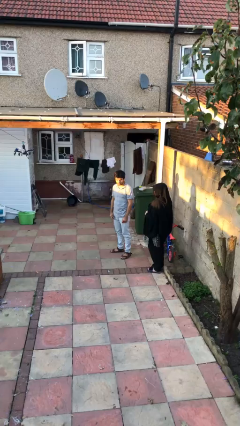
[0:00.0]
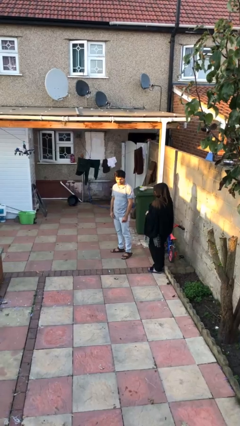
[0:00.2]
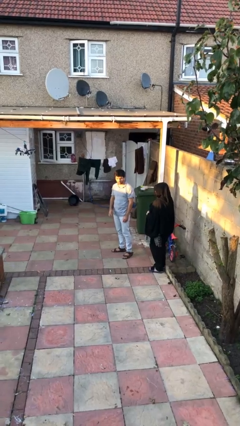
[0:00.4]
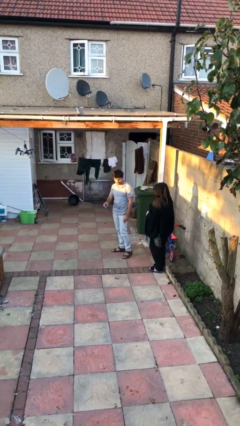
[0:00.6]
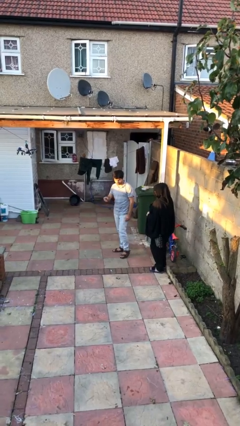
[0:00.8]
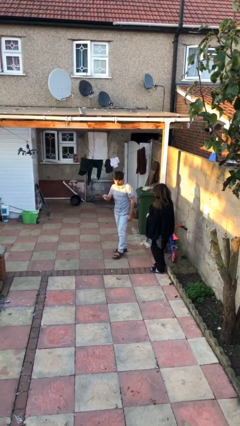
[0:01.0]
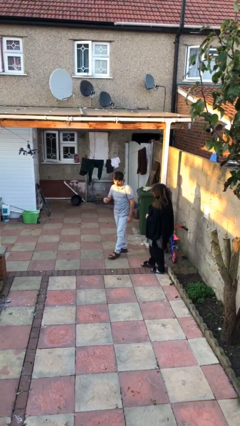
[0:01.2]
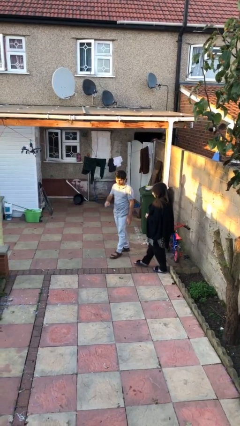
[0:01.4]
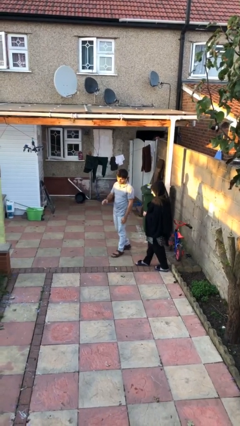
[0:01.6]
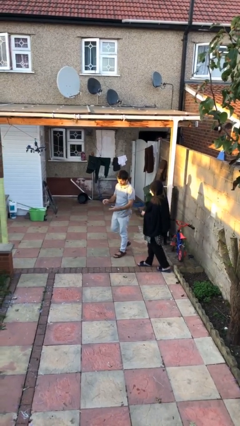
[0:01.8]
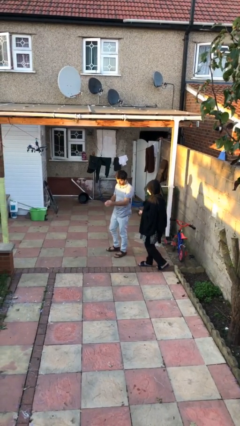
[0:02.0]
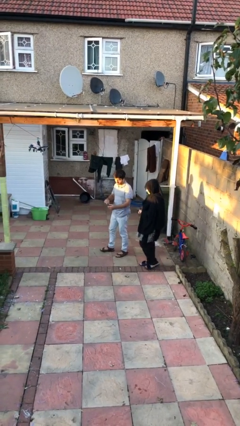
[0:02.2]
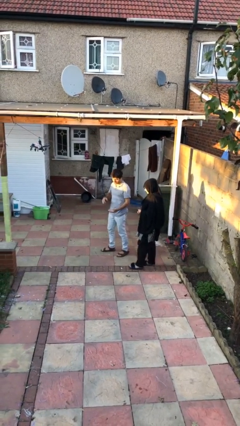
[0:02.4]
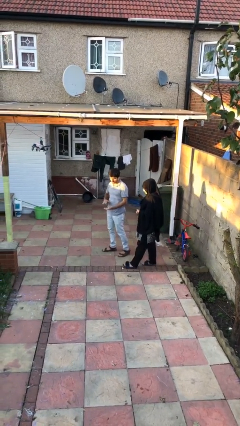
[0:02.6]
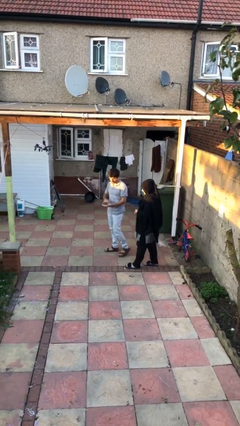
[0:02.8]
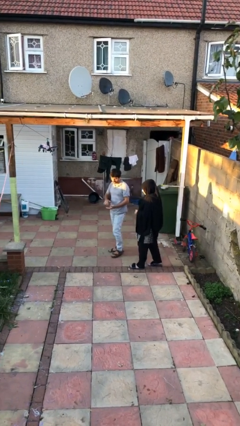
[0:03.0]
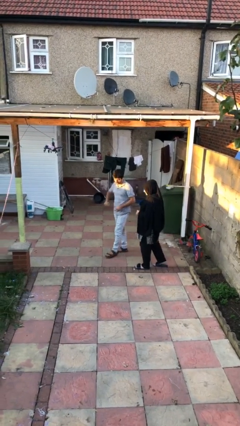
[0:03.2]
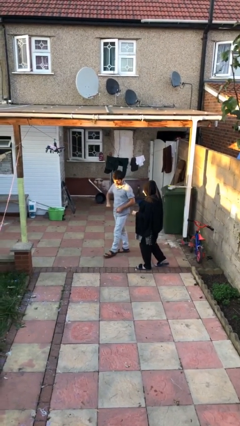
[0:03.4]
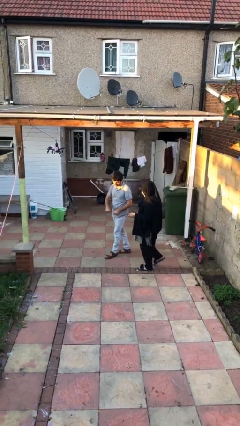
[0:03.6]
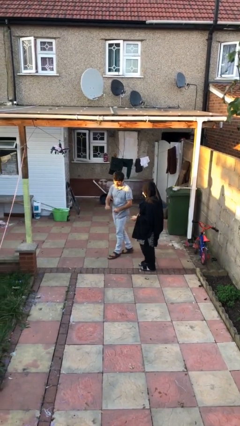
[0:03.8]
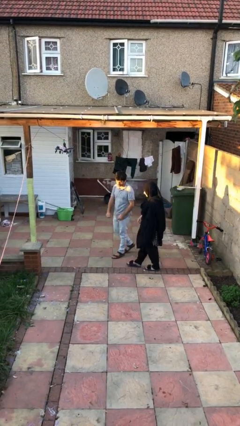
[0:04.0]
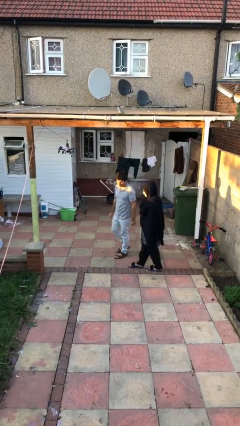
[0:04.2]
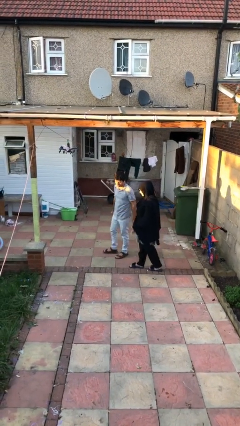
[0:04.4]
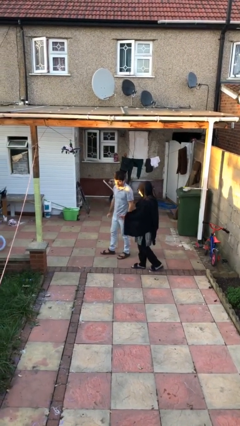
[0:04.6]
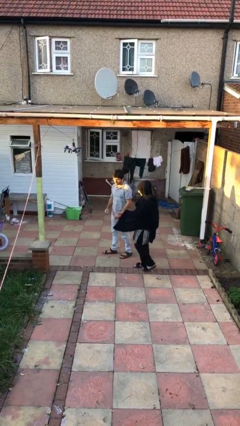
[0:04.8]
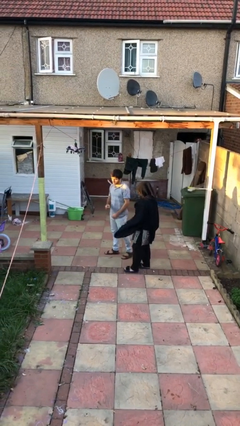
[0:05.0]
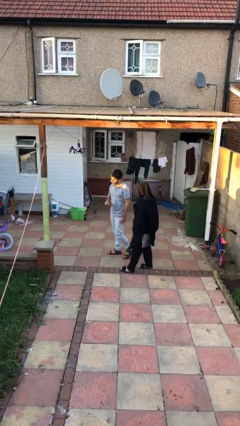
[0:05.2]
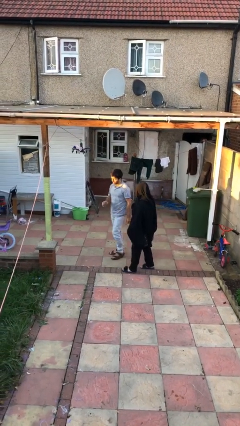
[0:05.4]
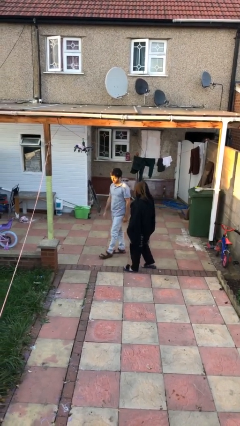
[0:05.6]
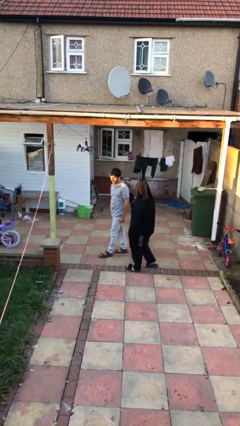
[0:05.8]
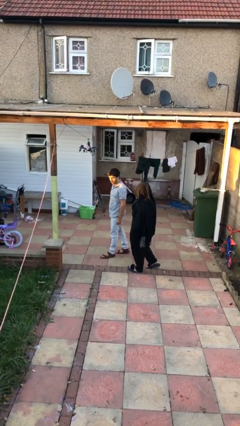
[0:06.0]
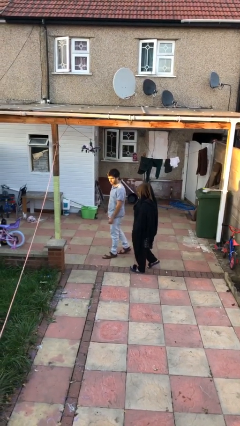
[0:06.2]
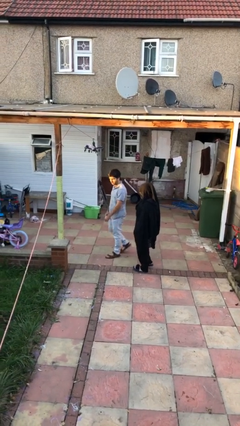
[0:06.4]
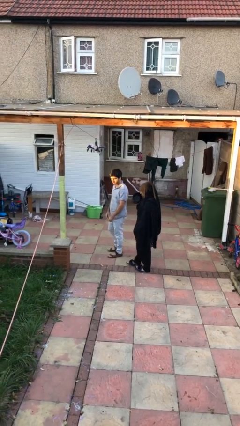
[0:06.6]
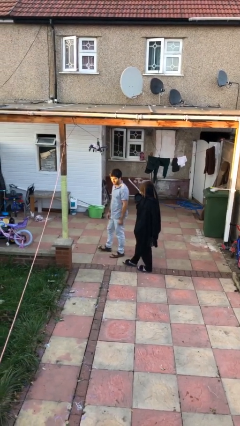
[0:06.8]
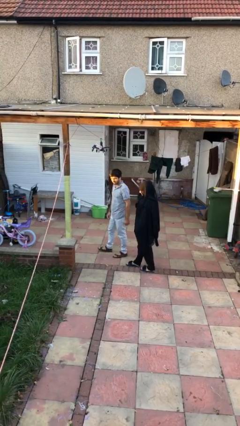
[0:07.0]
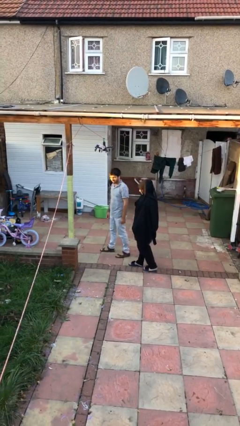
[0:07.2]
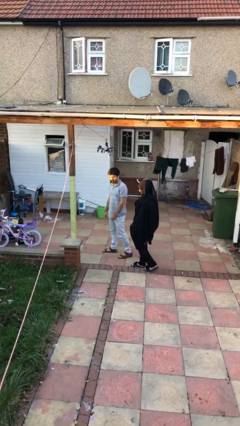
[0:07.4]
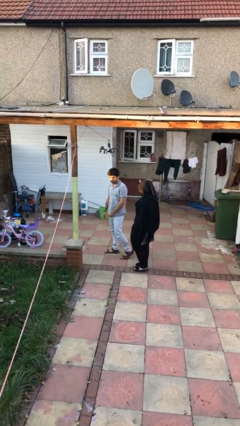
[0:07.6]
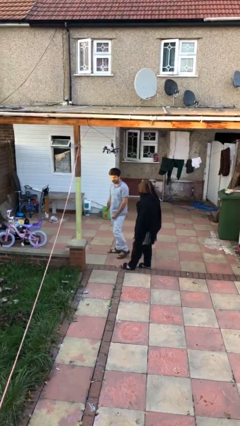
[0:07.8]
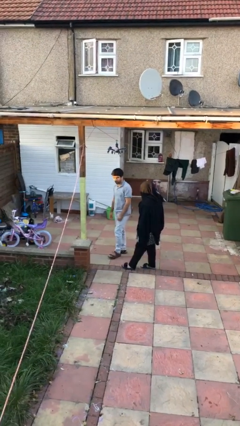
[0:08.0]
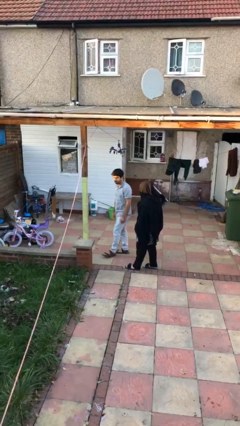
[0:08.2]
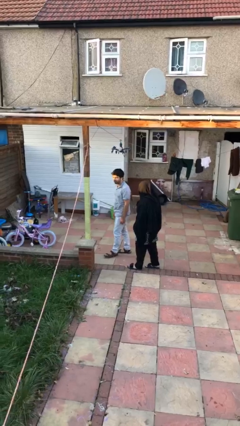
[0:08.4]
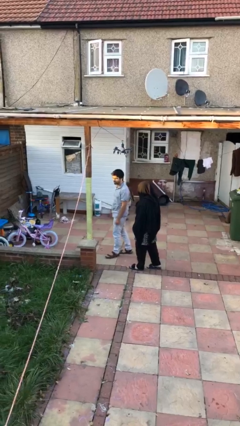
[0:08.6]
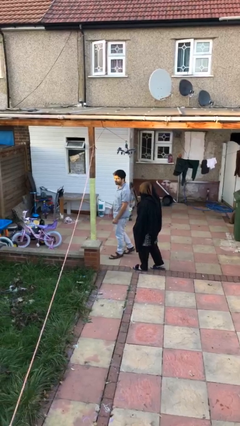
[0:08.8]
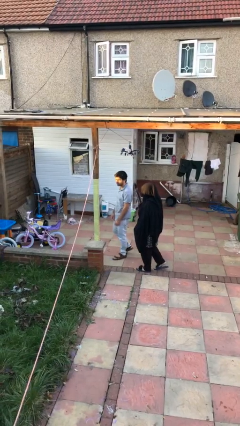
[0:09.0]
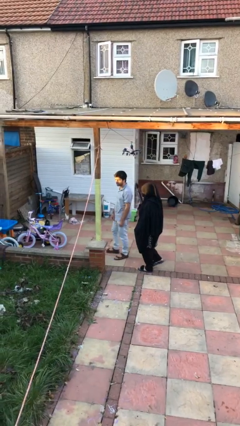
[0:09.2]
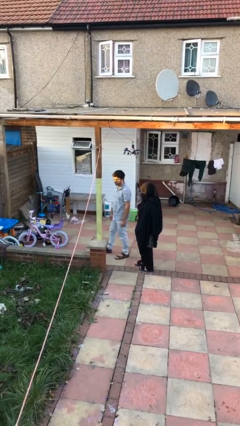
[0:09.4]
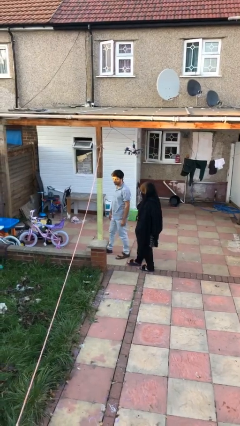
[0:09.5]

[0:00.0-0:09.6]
person talks to person

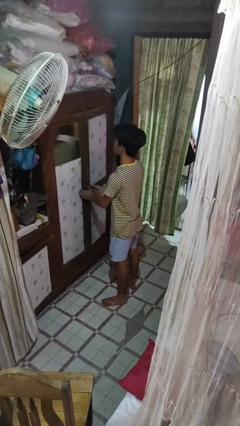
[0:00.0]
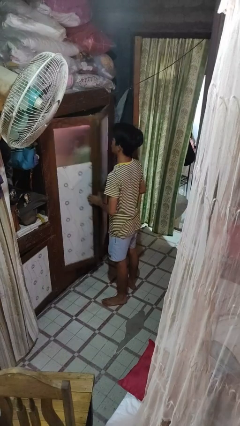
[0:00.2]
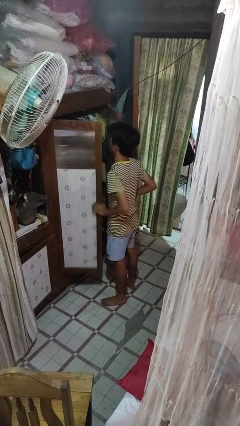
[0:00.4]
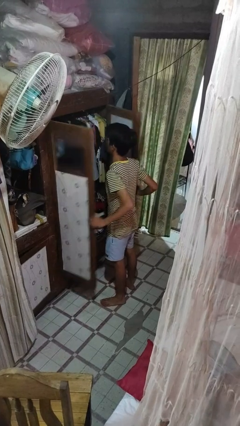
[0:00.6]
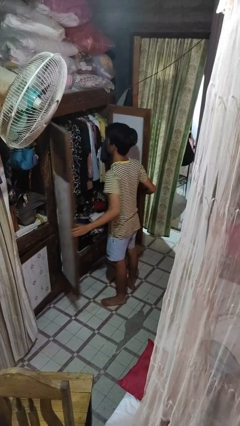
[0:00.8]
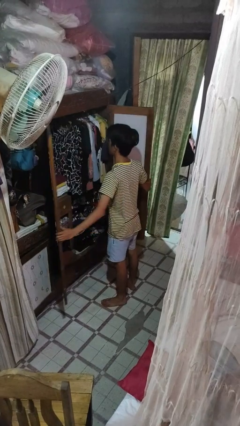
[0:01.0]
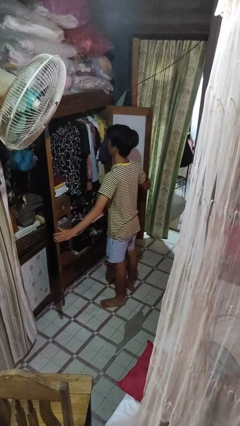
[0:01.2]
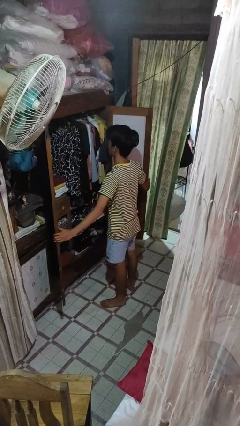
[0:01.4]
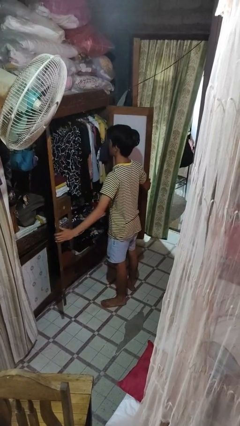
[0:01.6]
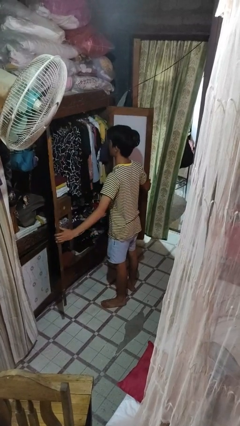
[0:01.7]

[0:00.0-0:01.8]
person opens closet door

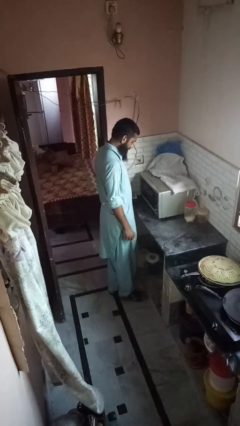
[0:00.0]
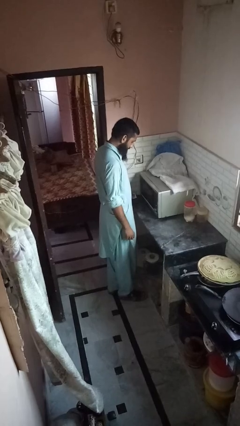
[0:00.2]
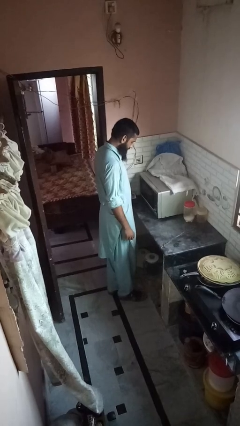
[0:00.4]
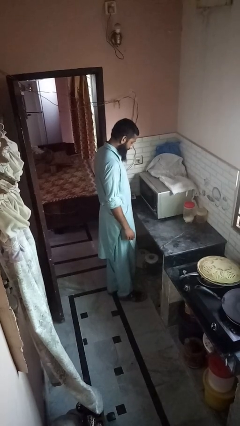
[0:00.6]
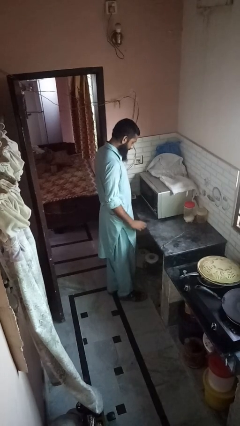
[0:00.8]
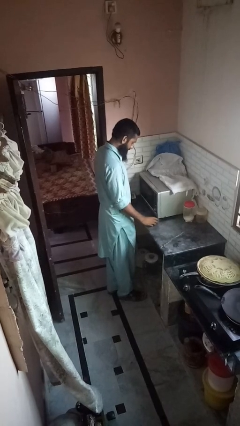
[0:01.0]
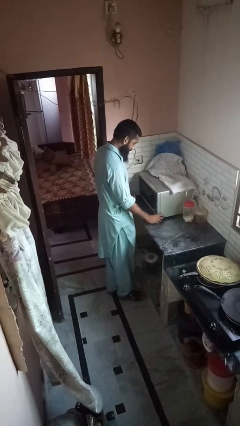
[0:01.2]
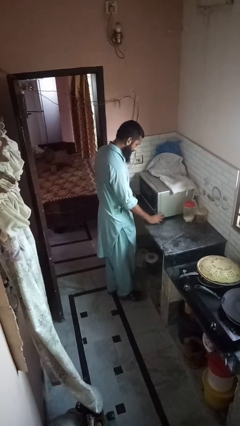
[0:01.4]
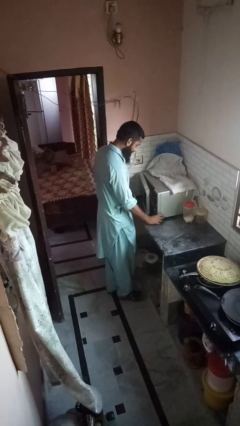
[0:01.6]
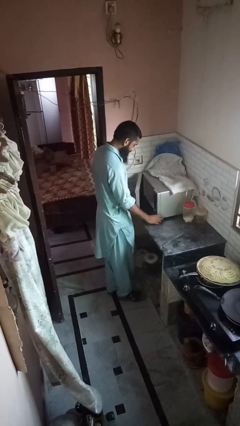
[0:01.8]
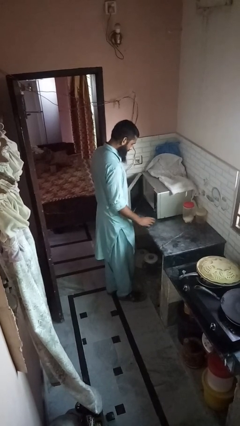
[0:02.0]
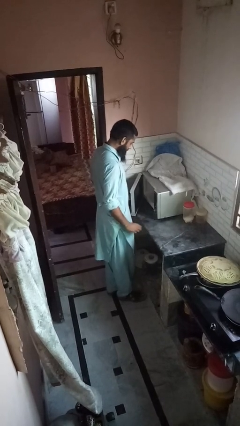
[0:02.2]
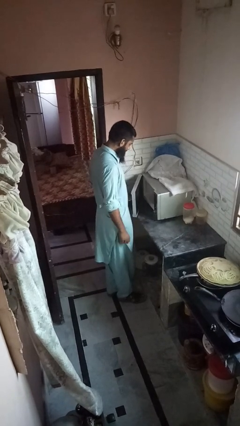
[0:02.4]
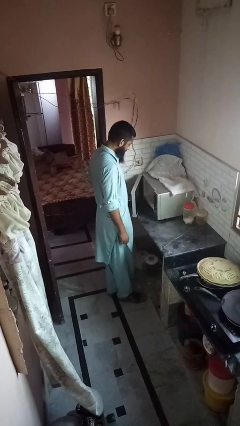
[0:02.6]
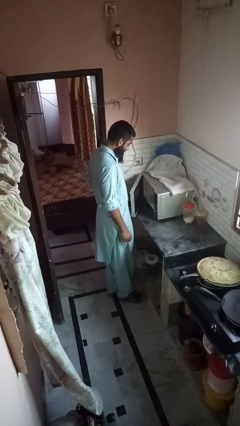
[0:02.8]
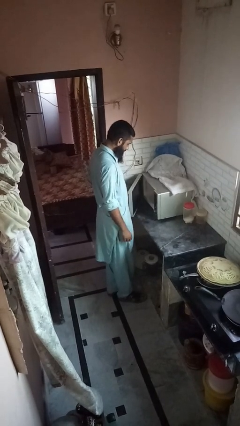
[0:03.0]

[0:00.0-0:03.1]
person opens microwave

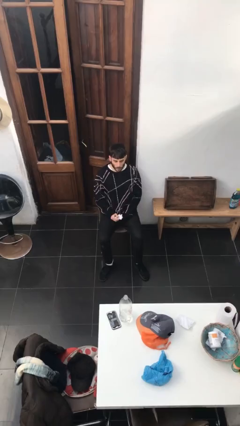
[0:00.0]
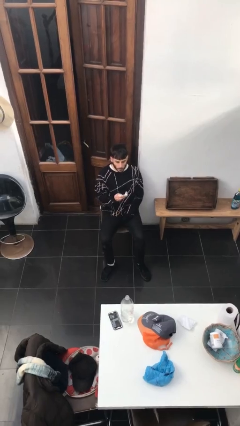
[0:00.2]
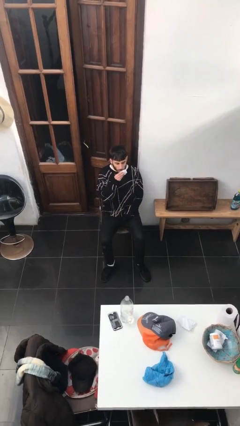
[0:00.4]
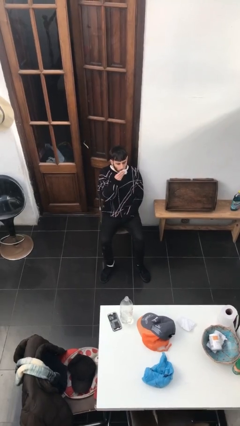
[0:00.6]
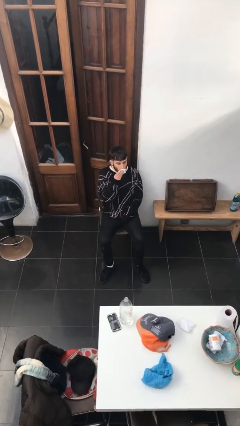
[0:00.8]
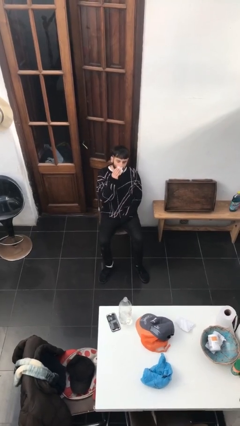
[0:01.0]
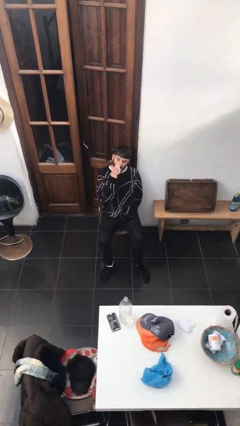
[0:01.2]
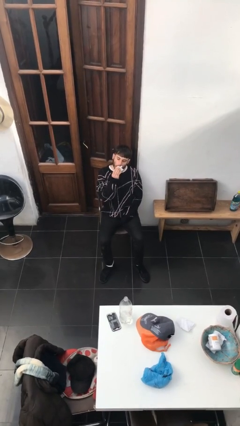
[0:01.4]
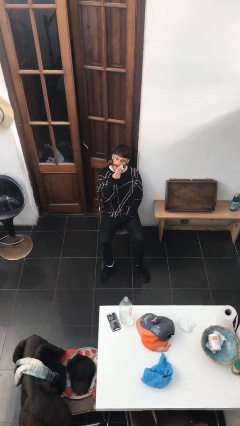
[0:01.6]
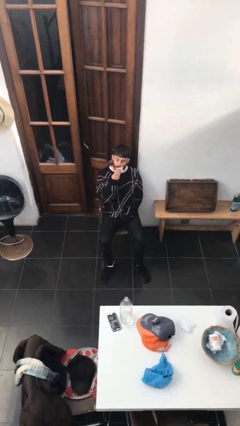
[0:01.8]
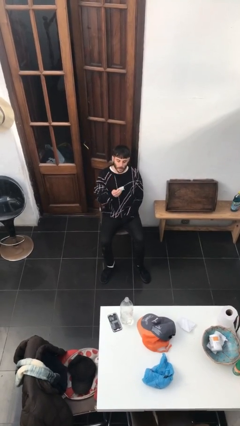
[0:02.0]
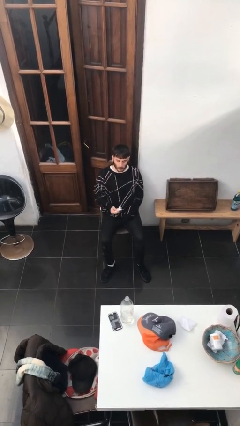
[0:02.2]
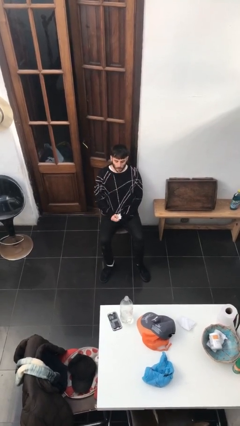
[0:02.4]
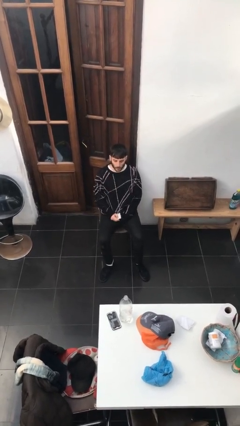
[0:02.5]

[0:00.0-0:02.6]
person wipes mouth with napkin

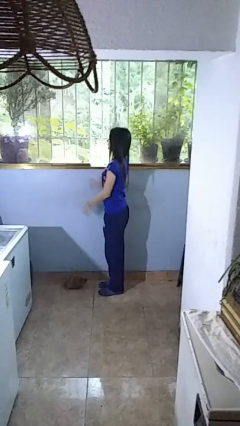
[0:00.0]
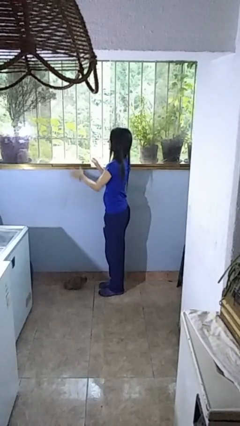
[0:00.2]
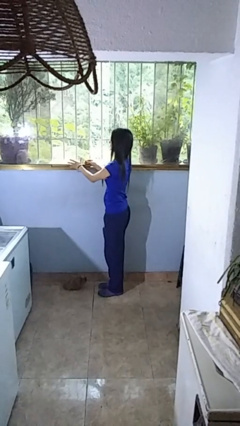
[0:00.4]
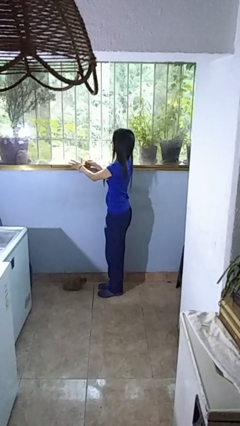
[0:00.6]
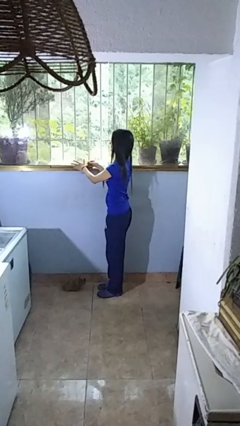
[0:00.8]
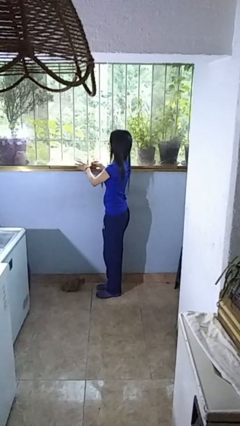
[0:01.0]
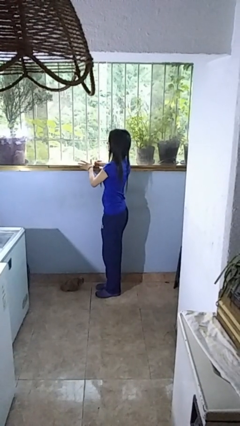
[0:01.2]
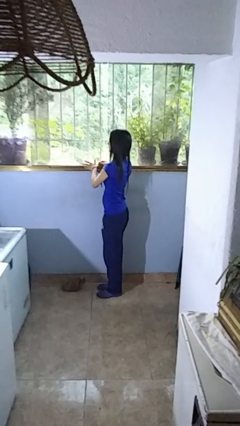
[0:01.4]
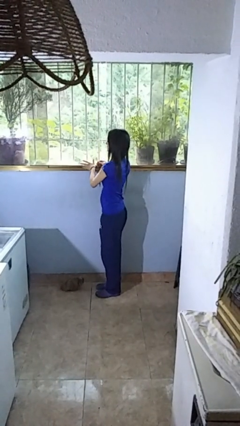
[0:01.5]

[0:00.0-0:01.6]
person closes home window
